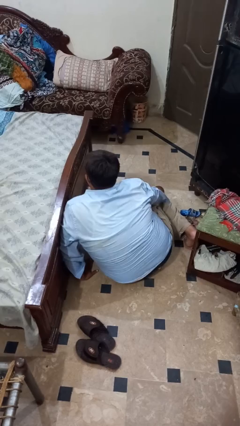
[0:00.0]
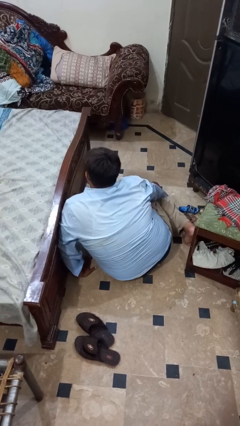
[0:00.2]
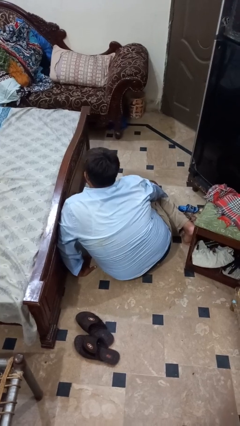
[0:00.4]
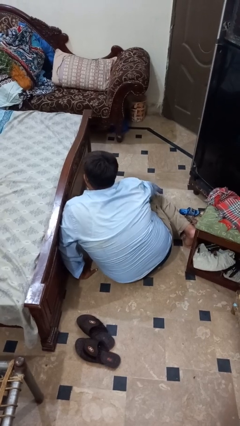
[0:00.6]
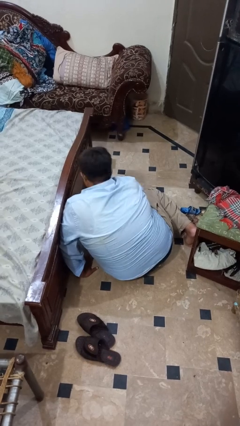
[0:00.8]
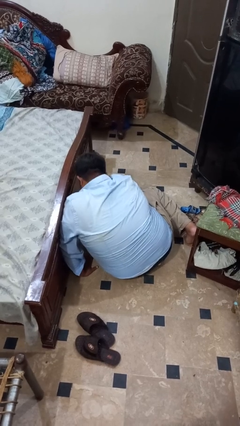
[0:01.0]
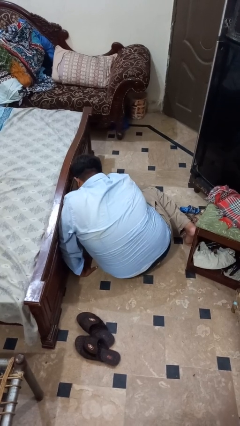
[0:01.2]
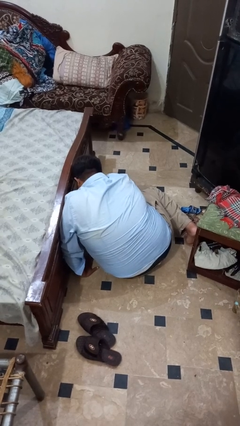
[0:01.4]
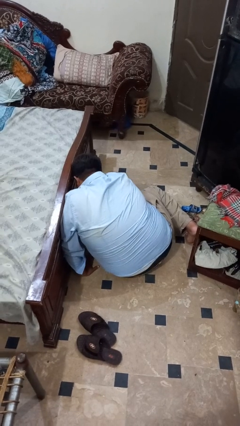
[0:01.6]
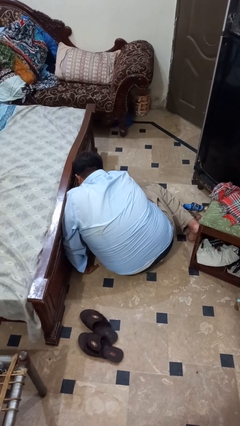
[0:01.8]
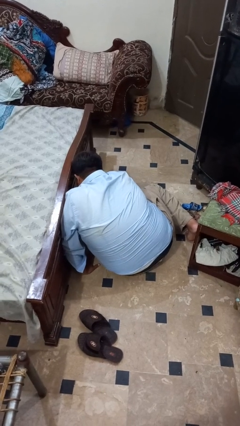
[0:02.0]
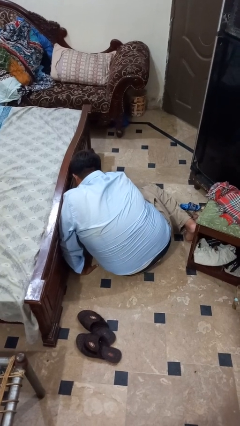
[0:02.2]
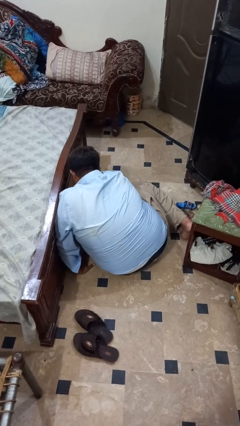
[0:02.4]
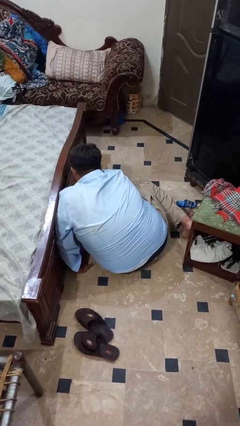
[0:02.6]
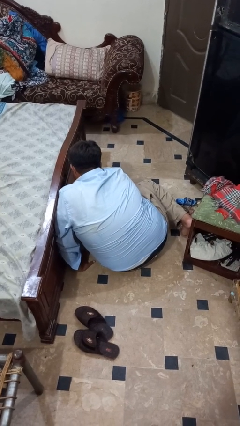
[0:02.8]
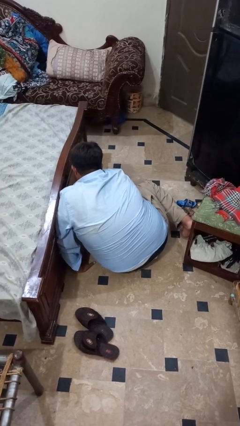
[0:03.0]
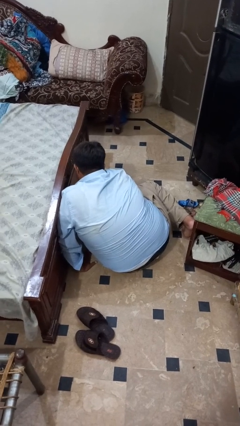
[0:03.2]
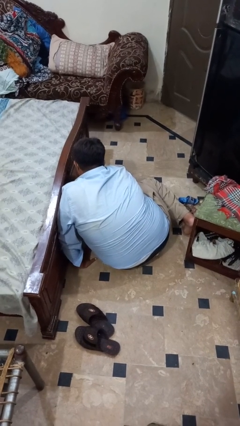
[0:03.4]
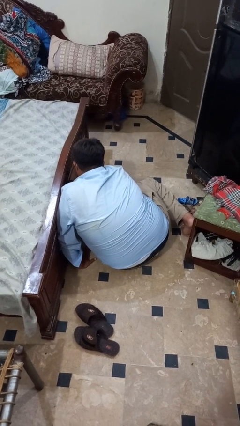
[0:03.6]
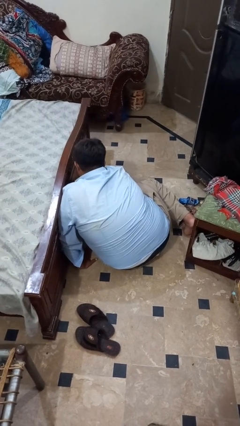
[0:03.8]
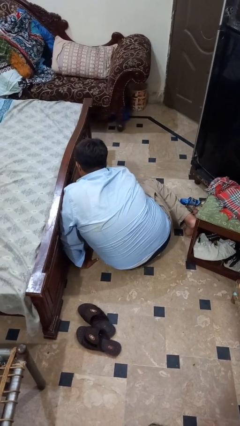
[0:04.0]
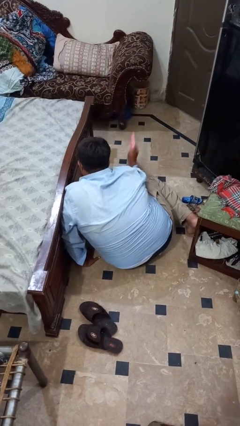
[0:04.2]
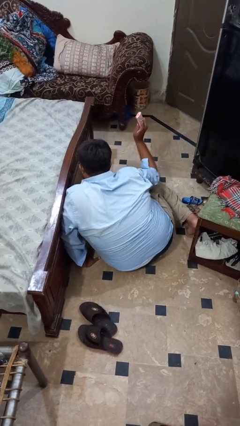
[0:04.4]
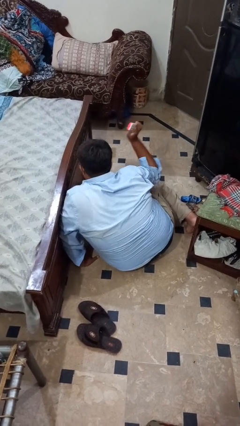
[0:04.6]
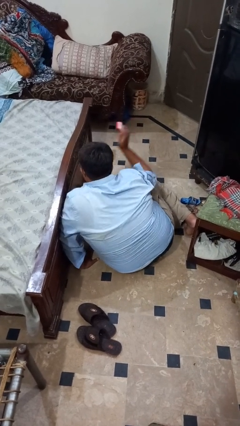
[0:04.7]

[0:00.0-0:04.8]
person searches under bed

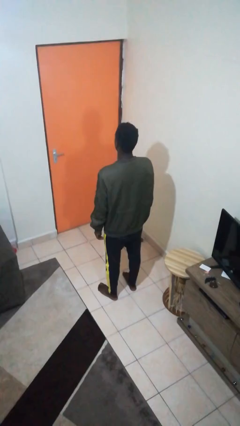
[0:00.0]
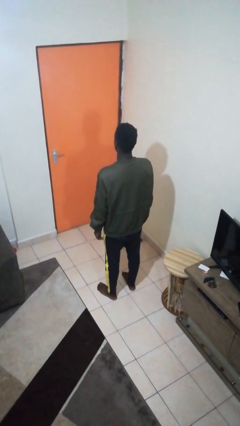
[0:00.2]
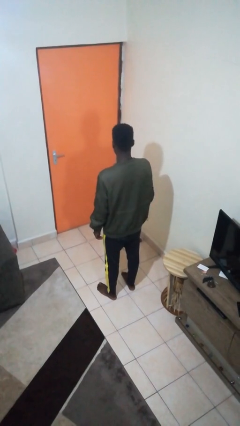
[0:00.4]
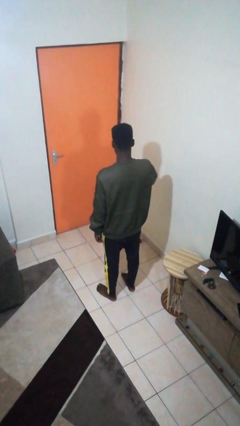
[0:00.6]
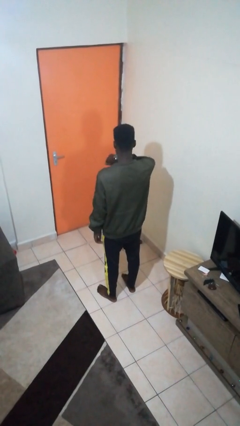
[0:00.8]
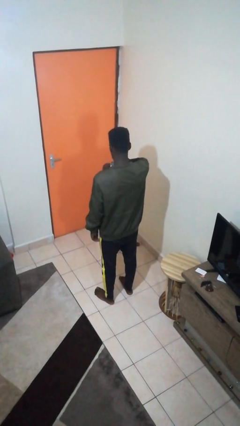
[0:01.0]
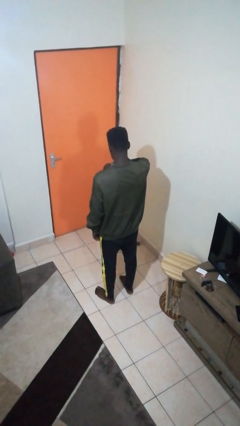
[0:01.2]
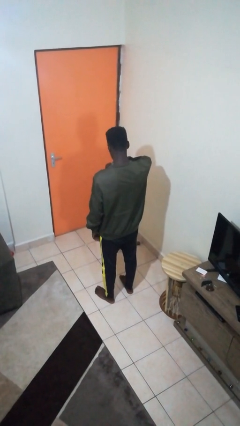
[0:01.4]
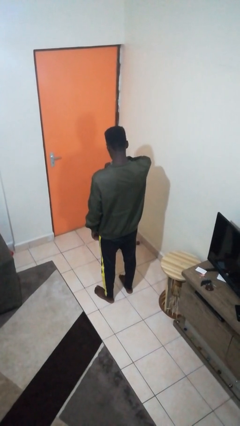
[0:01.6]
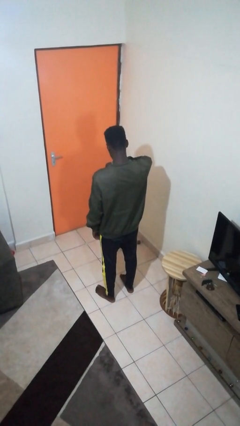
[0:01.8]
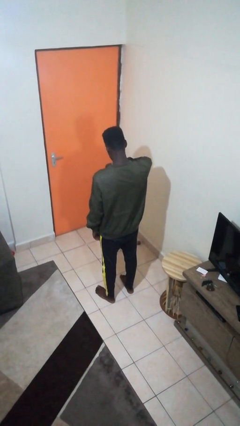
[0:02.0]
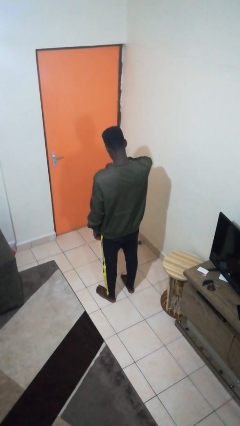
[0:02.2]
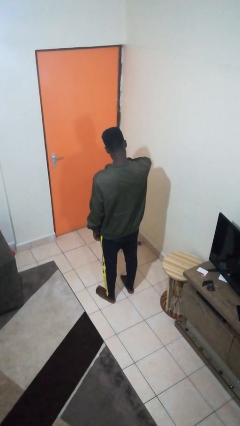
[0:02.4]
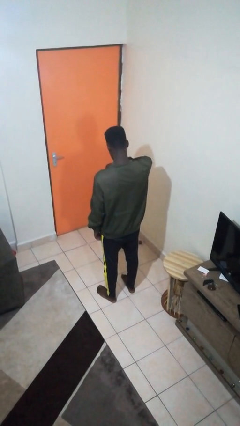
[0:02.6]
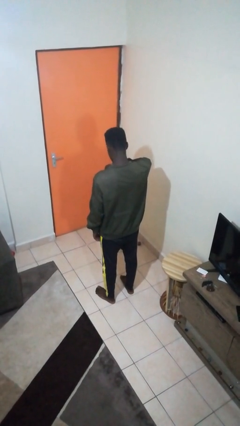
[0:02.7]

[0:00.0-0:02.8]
person looks at wristwatch

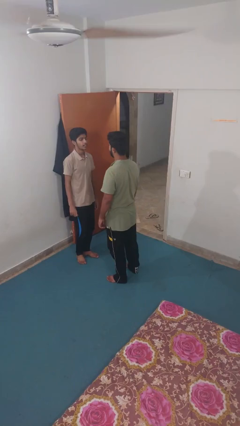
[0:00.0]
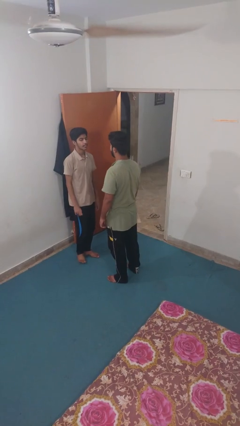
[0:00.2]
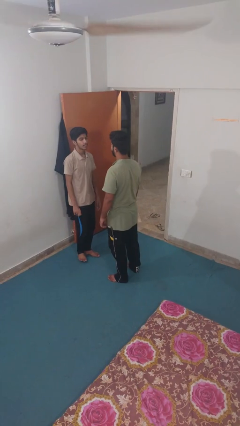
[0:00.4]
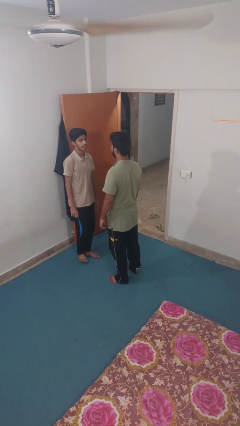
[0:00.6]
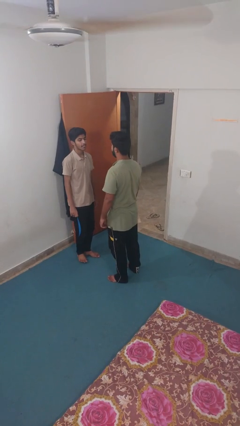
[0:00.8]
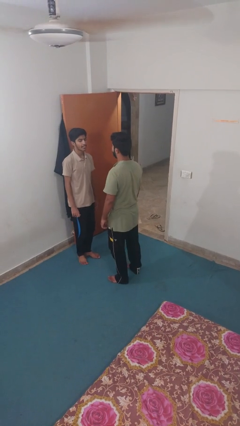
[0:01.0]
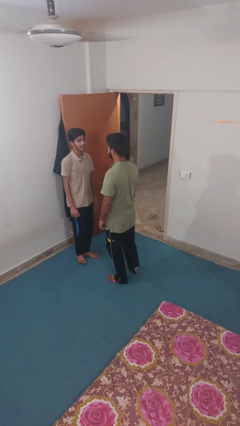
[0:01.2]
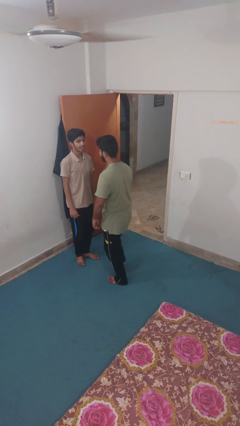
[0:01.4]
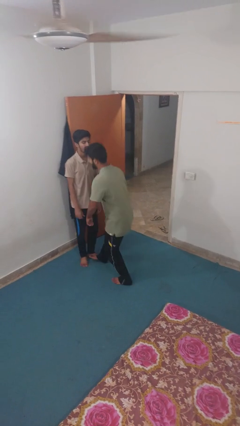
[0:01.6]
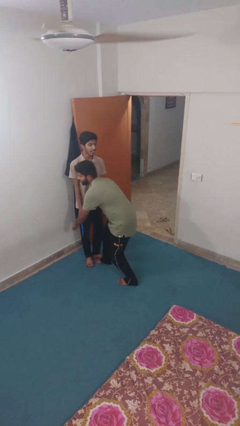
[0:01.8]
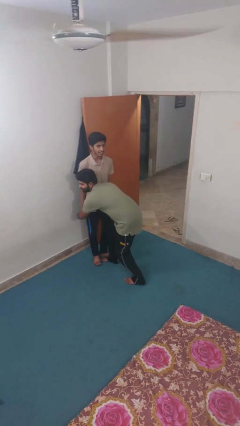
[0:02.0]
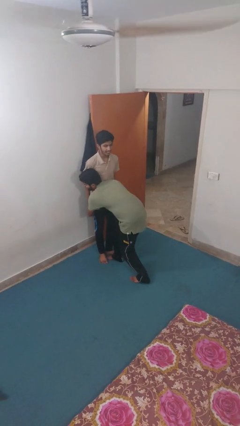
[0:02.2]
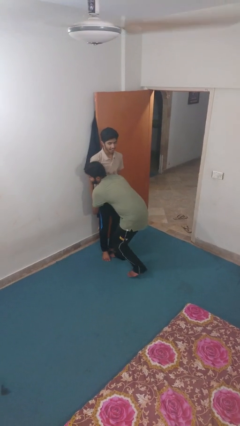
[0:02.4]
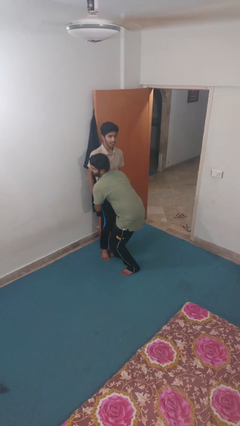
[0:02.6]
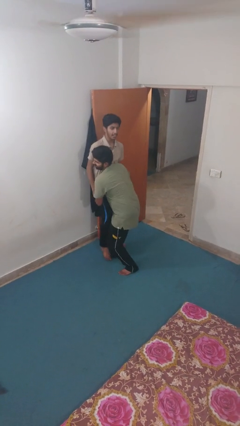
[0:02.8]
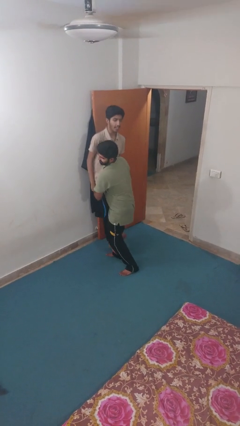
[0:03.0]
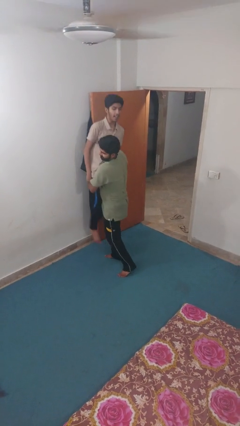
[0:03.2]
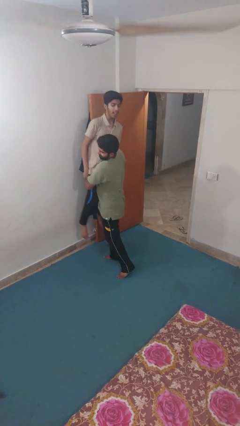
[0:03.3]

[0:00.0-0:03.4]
person picks up person

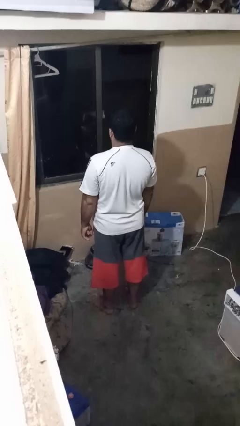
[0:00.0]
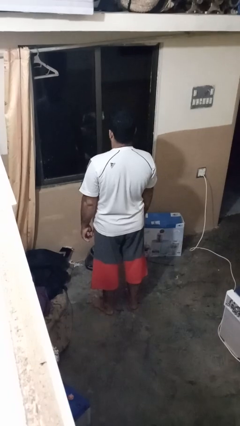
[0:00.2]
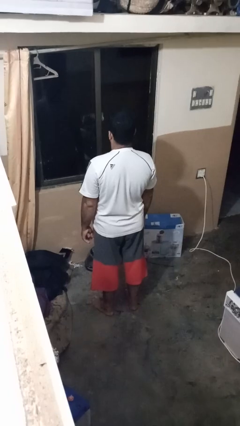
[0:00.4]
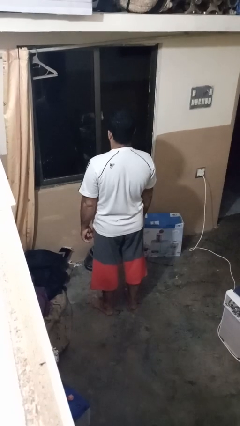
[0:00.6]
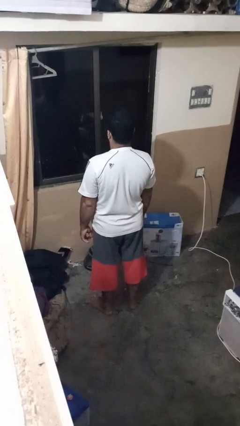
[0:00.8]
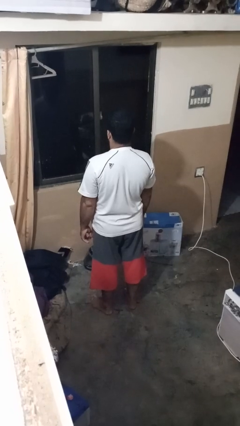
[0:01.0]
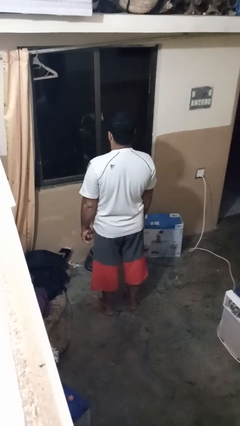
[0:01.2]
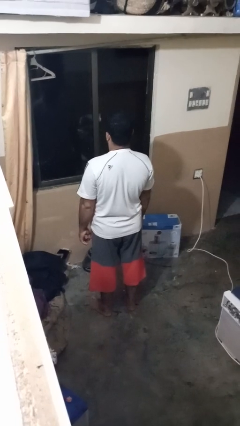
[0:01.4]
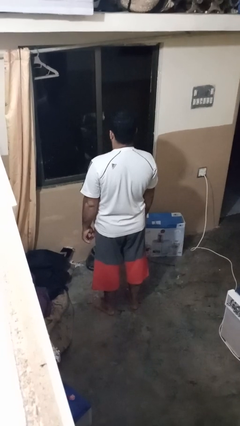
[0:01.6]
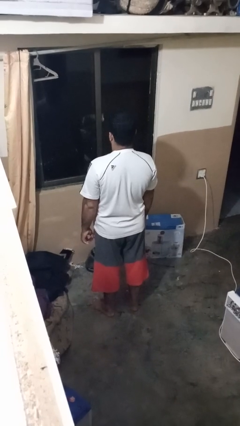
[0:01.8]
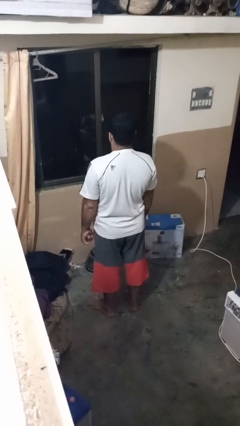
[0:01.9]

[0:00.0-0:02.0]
person puts on ring

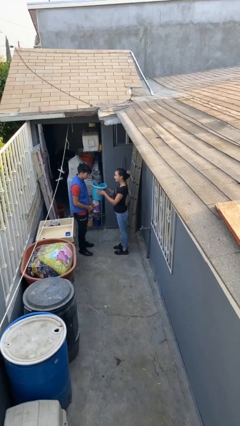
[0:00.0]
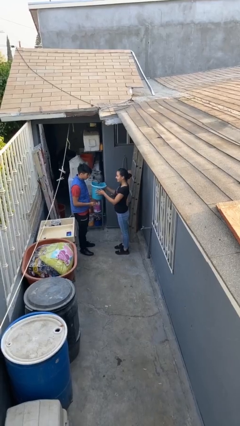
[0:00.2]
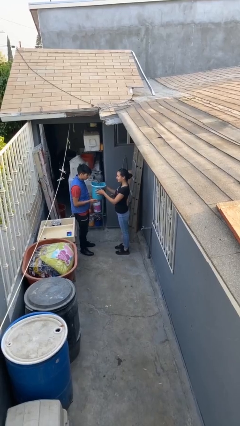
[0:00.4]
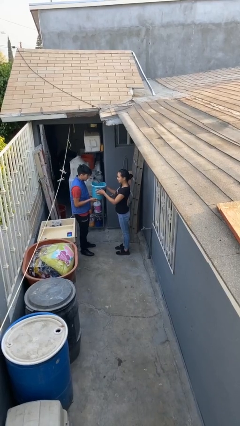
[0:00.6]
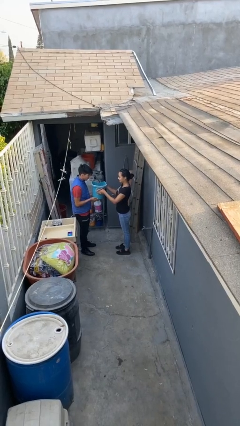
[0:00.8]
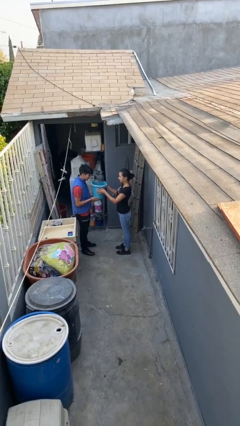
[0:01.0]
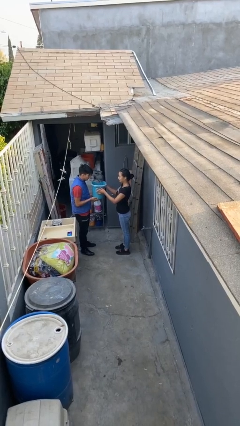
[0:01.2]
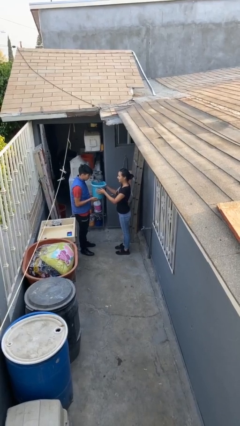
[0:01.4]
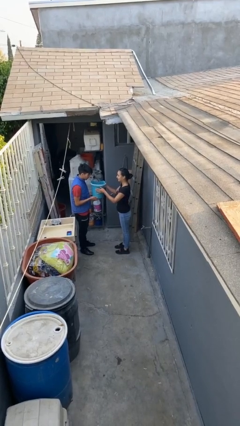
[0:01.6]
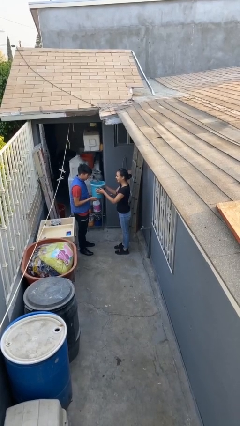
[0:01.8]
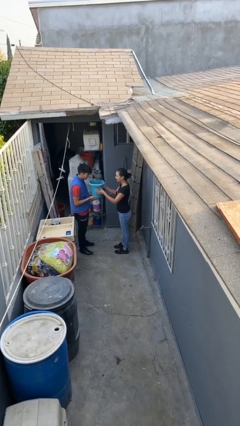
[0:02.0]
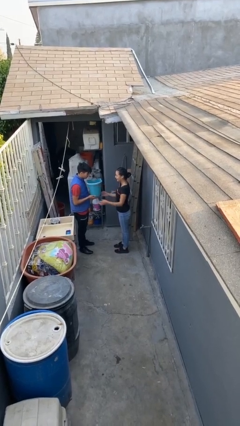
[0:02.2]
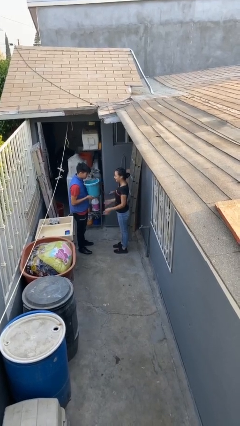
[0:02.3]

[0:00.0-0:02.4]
person transfers object to person

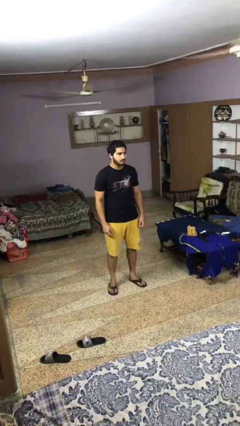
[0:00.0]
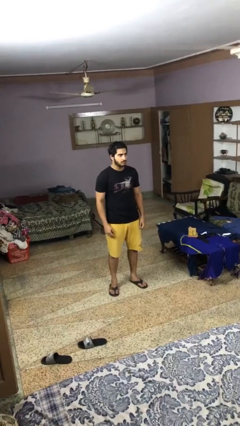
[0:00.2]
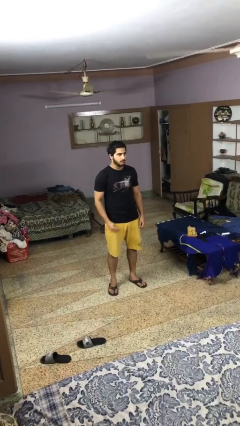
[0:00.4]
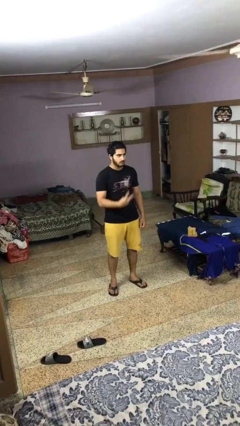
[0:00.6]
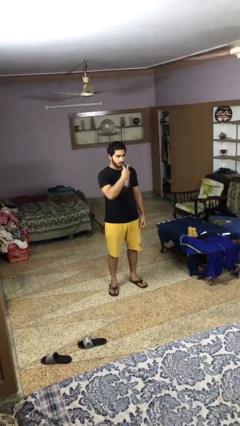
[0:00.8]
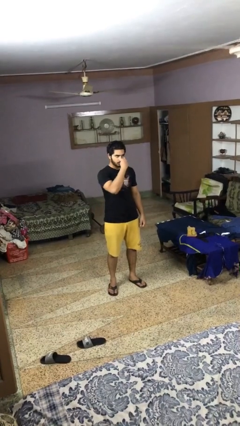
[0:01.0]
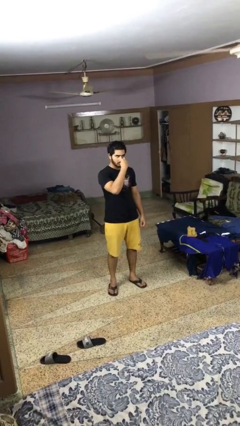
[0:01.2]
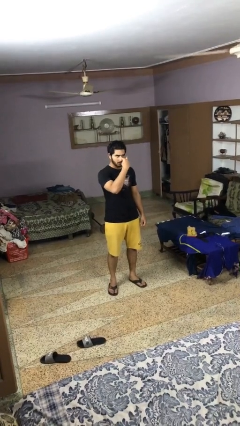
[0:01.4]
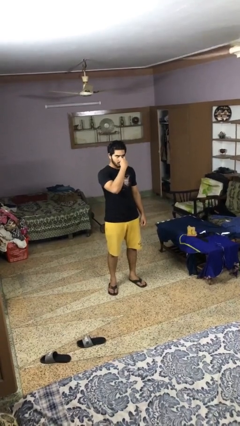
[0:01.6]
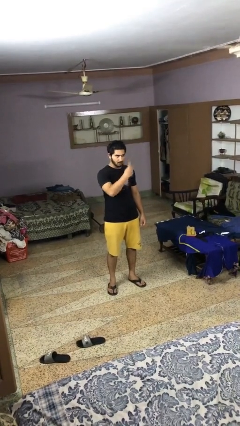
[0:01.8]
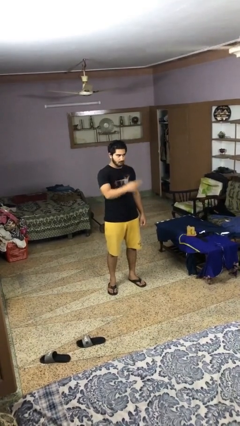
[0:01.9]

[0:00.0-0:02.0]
person gestures watch closely
